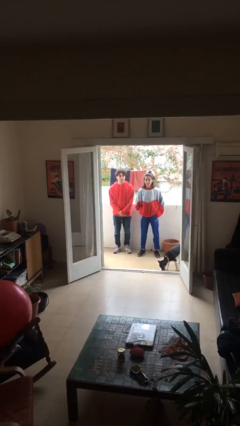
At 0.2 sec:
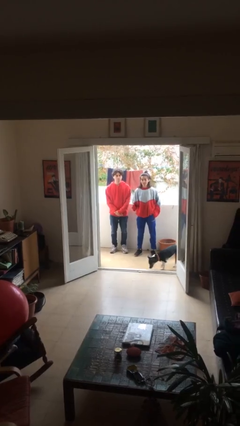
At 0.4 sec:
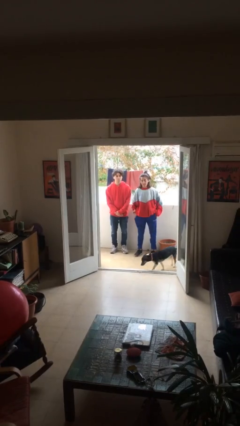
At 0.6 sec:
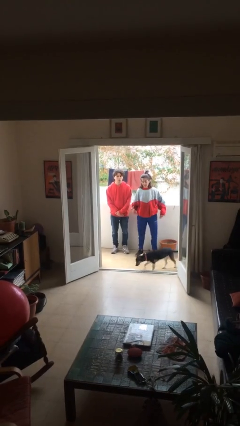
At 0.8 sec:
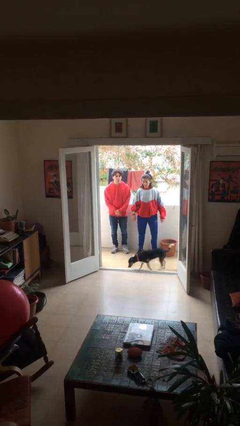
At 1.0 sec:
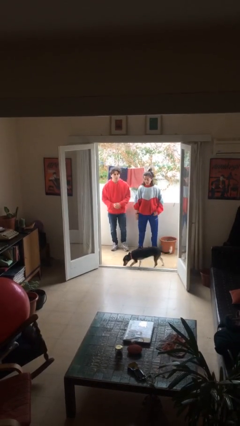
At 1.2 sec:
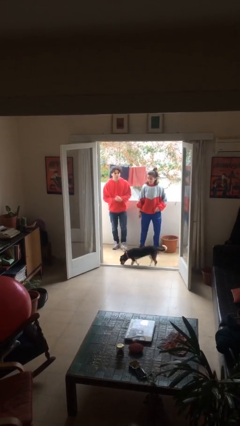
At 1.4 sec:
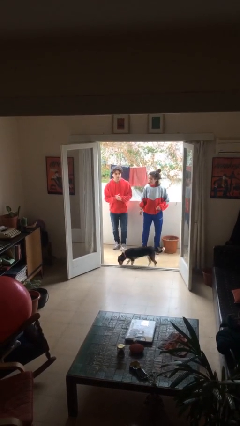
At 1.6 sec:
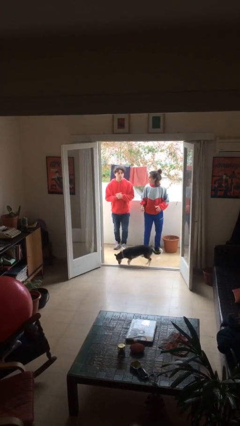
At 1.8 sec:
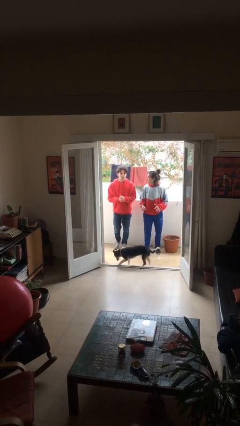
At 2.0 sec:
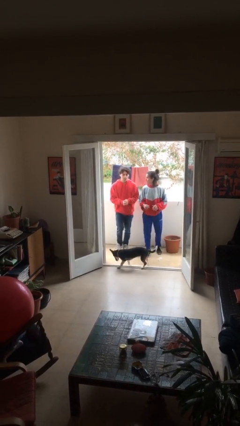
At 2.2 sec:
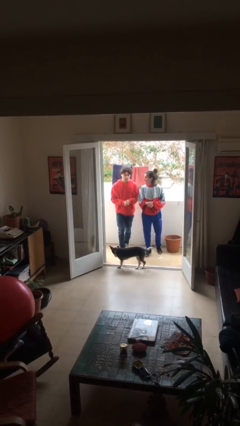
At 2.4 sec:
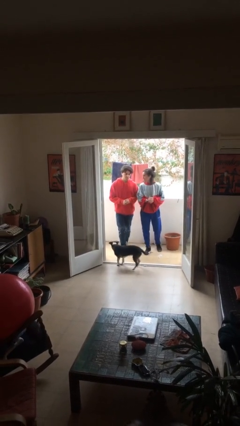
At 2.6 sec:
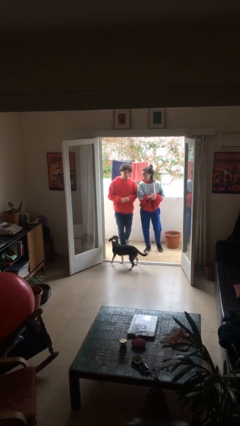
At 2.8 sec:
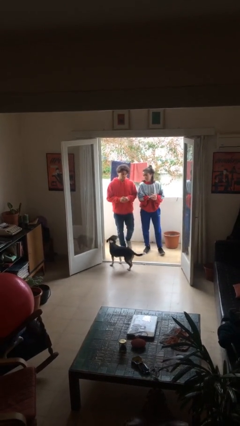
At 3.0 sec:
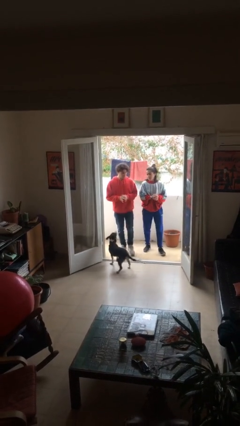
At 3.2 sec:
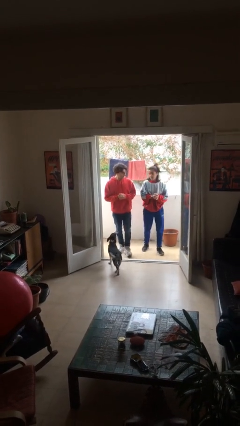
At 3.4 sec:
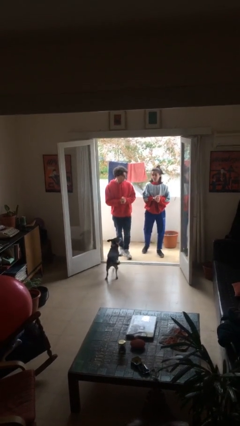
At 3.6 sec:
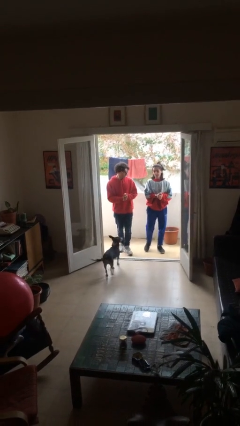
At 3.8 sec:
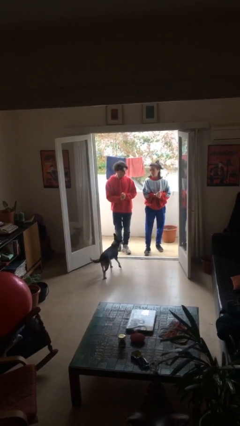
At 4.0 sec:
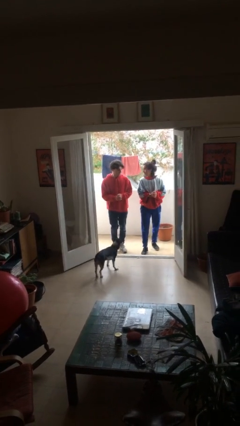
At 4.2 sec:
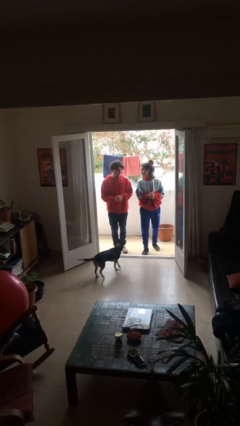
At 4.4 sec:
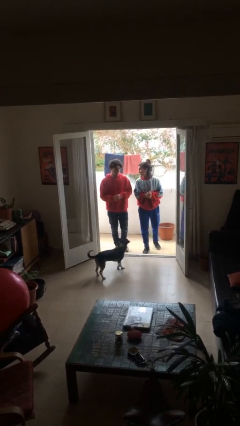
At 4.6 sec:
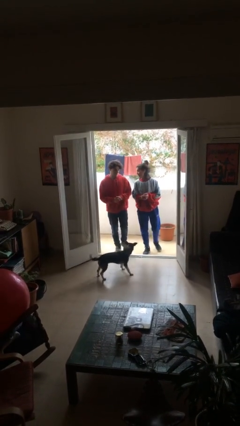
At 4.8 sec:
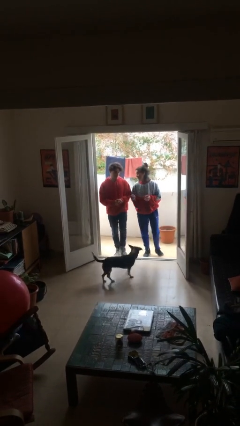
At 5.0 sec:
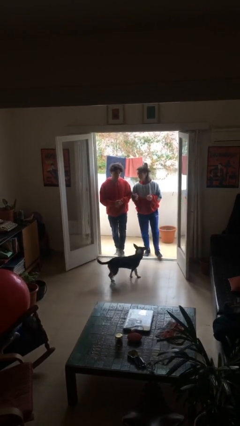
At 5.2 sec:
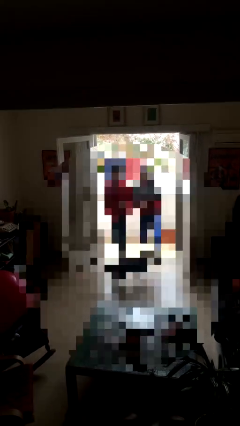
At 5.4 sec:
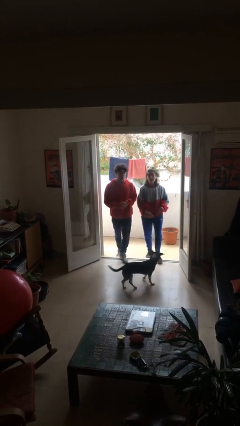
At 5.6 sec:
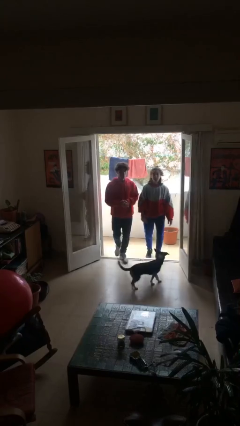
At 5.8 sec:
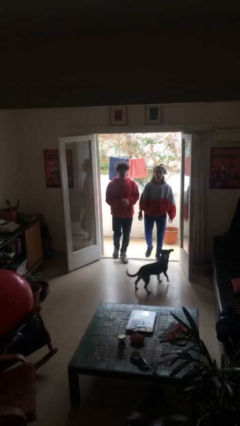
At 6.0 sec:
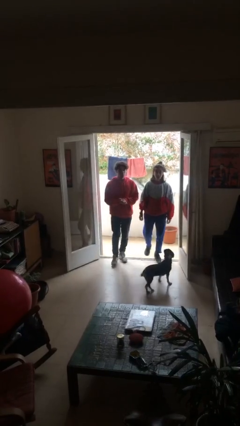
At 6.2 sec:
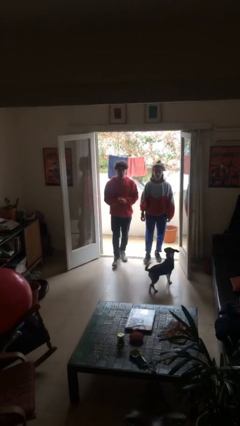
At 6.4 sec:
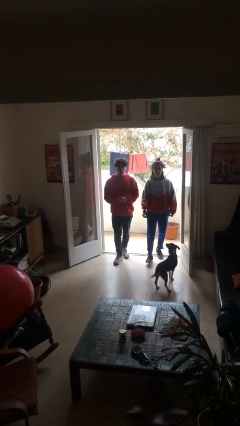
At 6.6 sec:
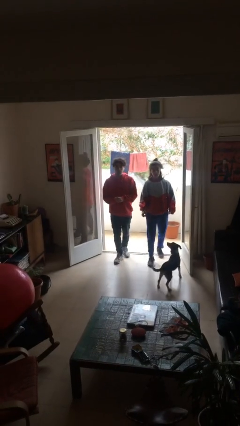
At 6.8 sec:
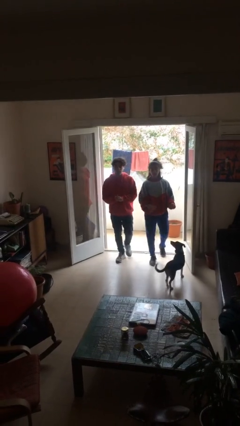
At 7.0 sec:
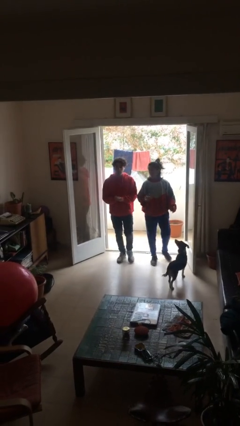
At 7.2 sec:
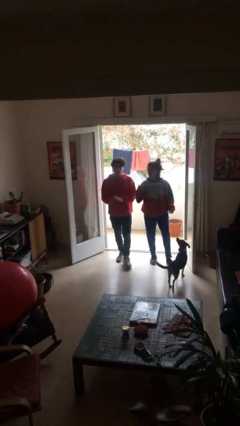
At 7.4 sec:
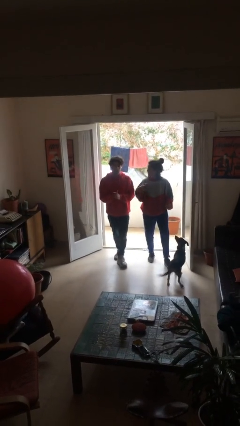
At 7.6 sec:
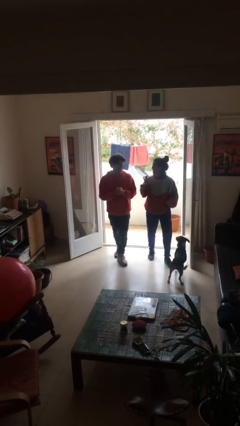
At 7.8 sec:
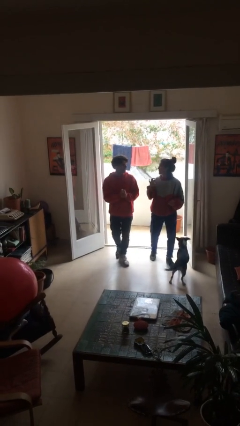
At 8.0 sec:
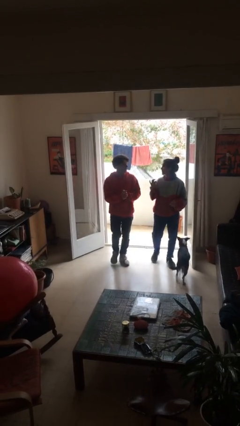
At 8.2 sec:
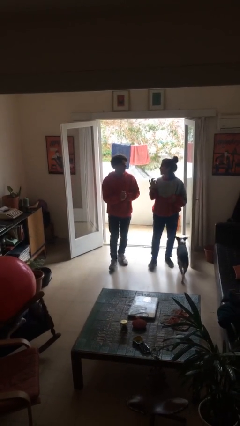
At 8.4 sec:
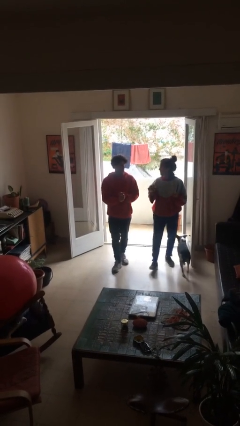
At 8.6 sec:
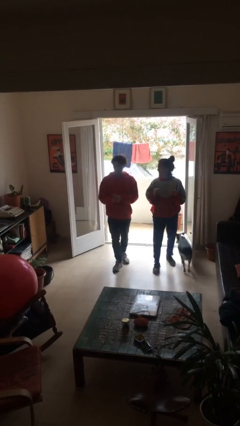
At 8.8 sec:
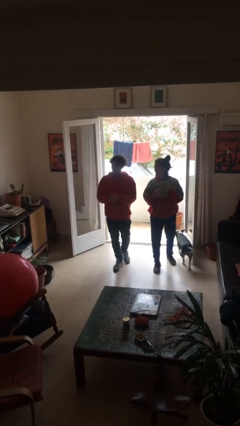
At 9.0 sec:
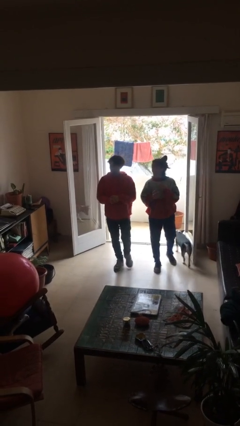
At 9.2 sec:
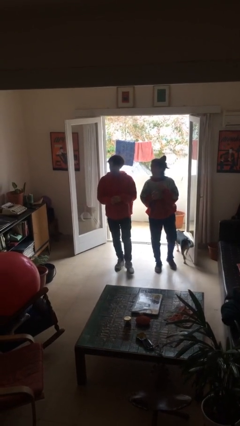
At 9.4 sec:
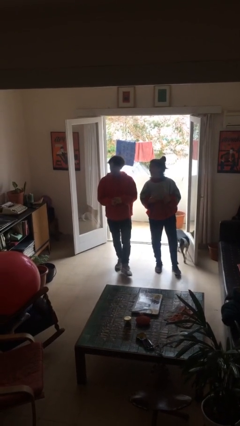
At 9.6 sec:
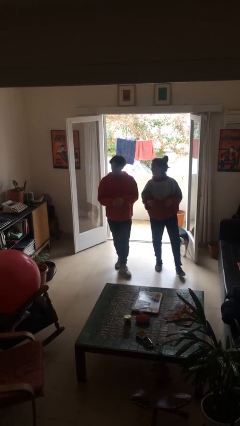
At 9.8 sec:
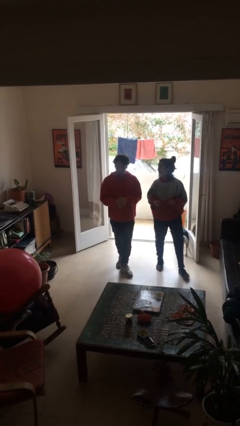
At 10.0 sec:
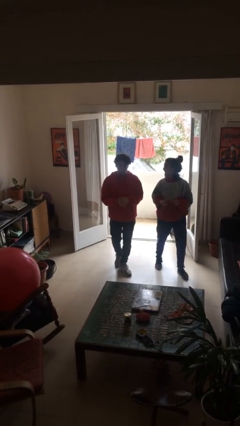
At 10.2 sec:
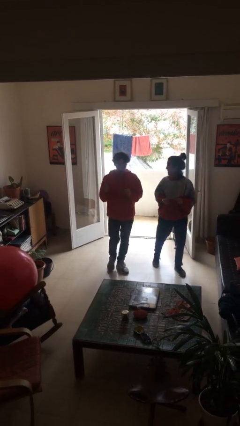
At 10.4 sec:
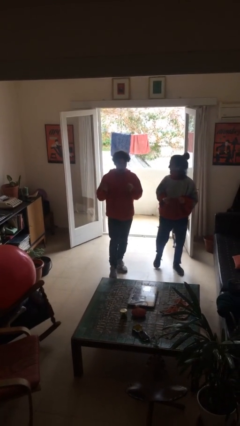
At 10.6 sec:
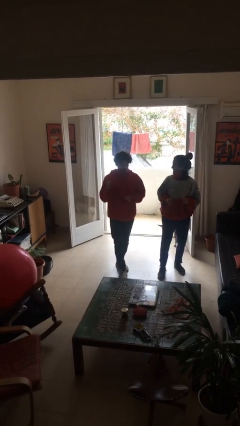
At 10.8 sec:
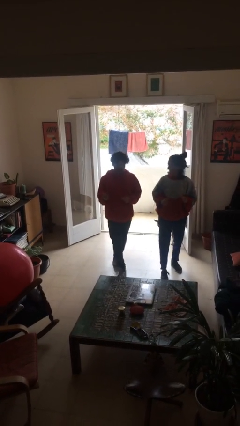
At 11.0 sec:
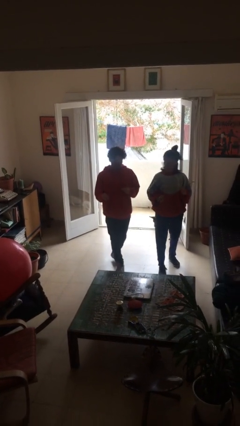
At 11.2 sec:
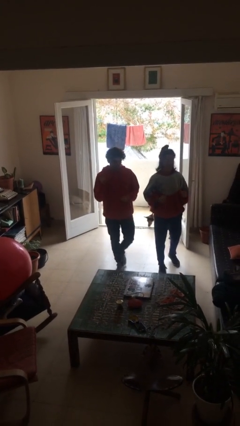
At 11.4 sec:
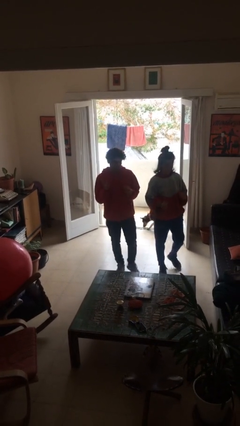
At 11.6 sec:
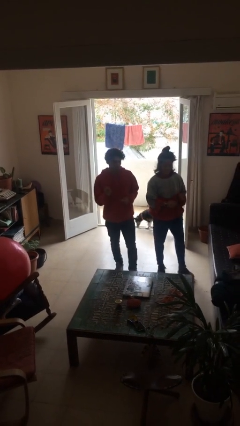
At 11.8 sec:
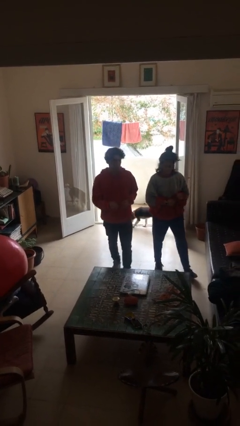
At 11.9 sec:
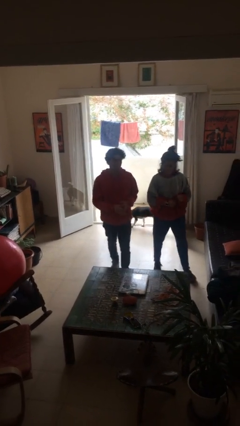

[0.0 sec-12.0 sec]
person talks to person

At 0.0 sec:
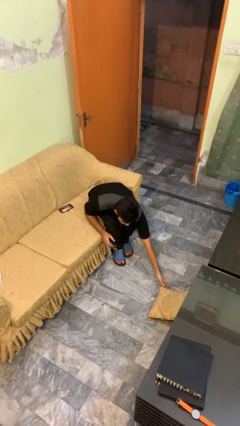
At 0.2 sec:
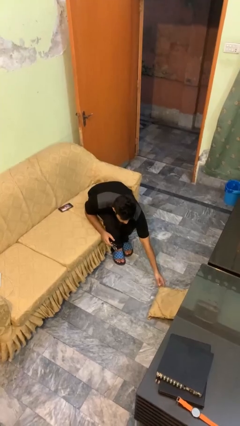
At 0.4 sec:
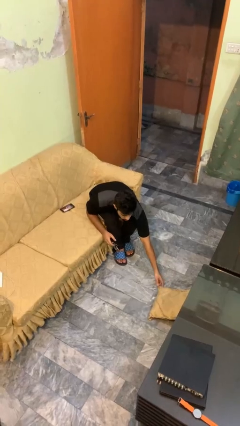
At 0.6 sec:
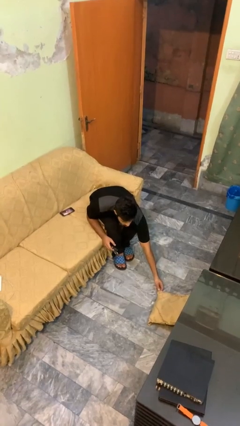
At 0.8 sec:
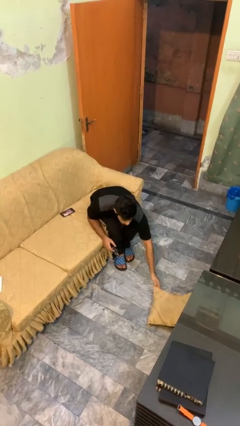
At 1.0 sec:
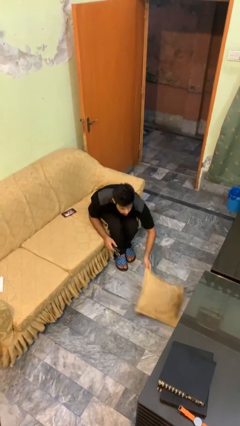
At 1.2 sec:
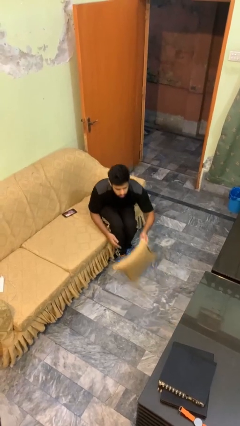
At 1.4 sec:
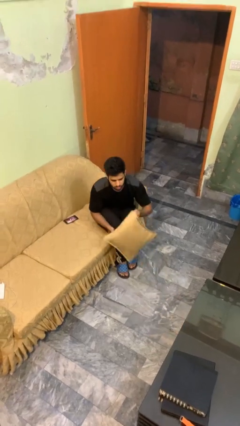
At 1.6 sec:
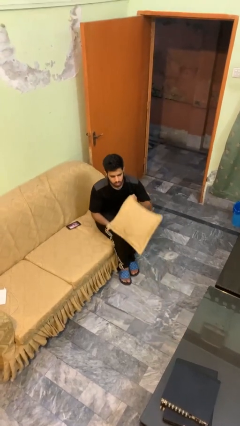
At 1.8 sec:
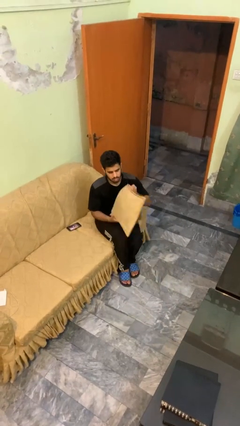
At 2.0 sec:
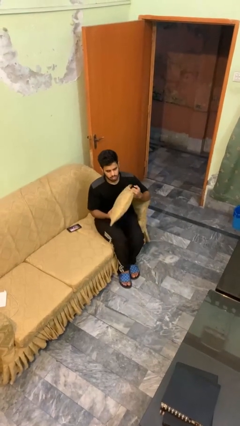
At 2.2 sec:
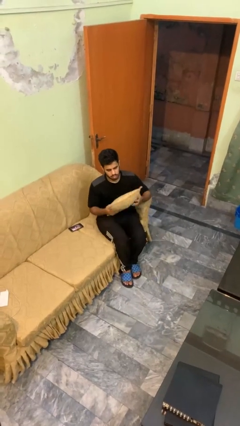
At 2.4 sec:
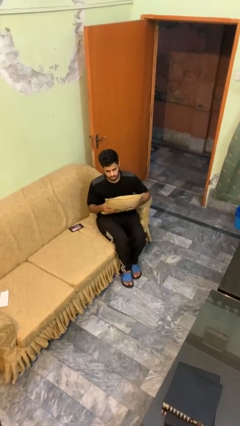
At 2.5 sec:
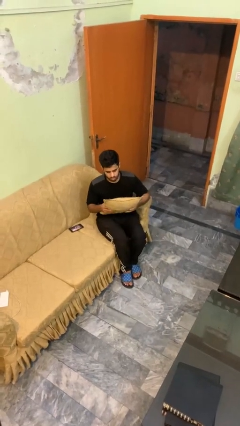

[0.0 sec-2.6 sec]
person picks up object from floor

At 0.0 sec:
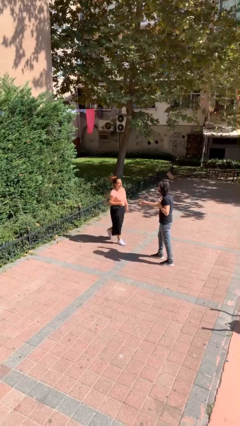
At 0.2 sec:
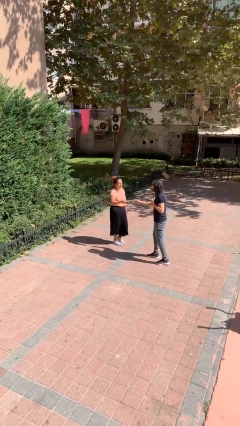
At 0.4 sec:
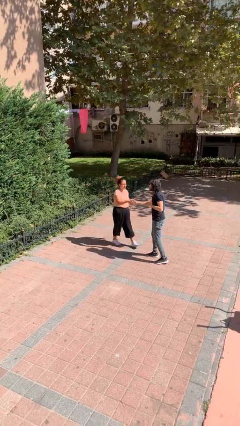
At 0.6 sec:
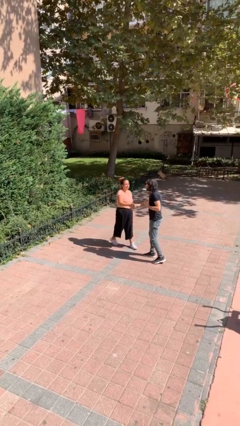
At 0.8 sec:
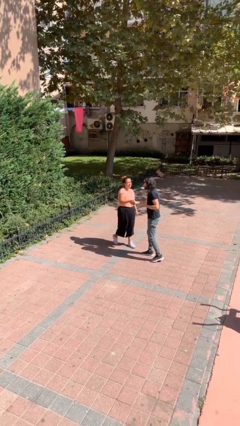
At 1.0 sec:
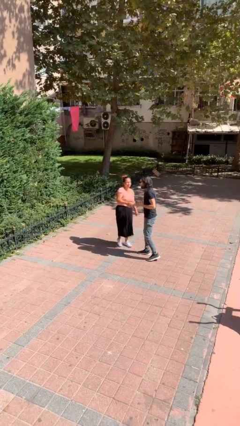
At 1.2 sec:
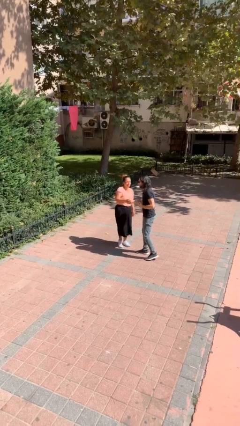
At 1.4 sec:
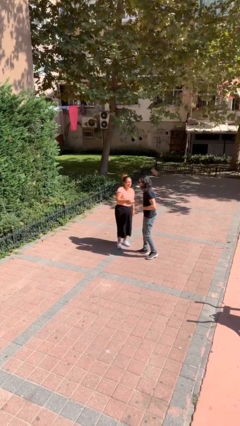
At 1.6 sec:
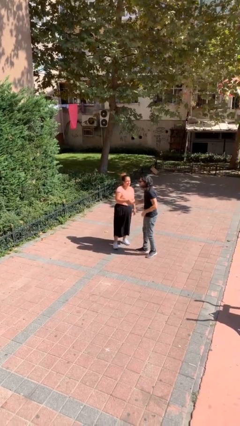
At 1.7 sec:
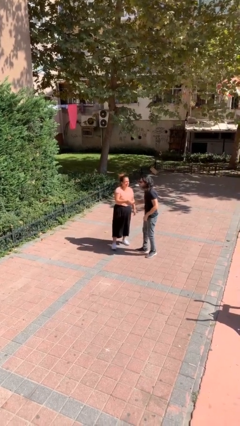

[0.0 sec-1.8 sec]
person shakes hand

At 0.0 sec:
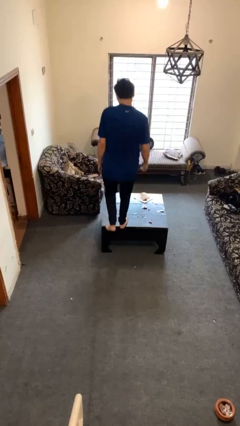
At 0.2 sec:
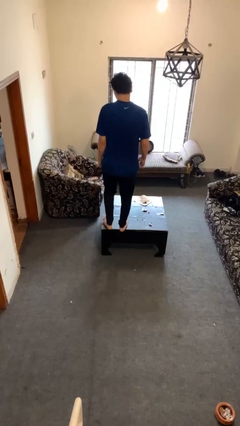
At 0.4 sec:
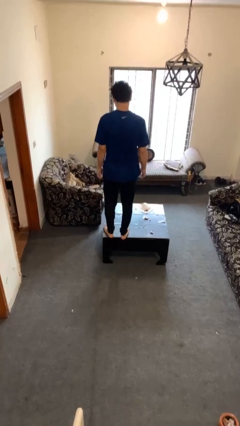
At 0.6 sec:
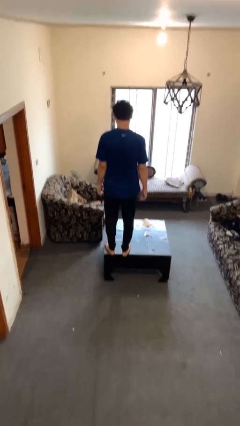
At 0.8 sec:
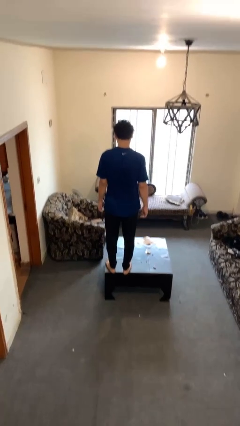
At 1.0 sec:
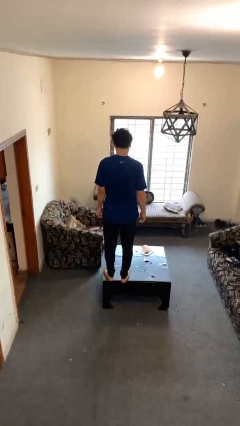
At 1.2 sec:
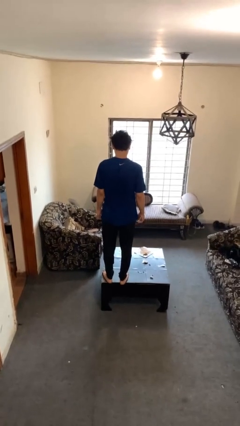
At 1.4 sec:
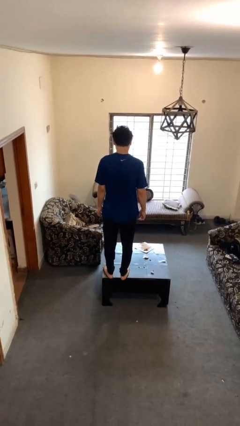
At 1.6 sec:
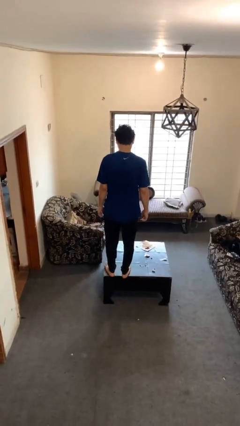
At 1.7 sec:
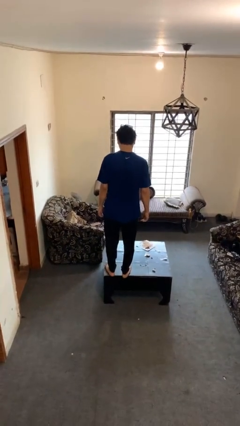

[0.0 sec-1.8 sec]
person climbs on table
